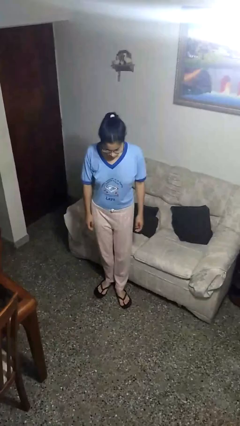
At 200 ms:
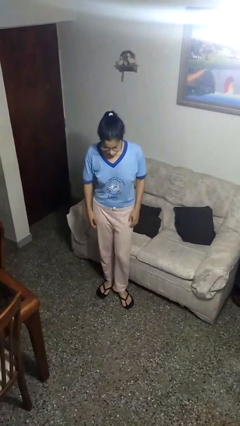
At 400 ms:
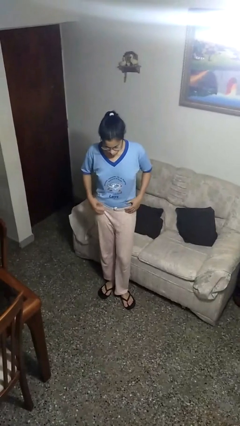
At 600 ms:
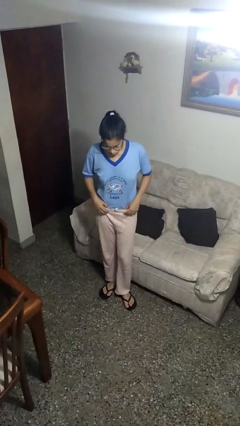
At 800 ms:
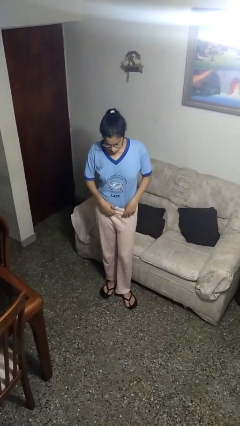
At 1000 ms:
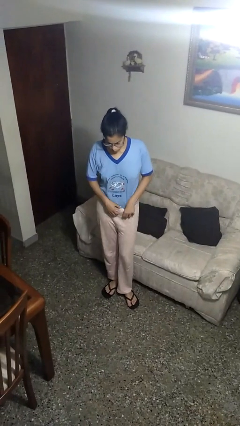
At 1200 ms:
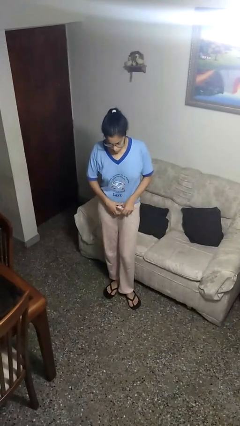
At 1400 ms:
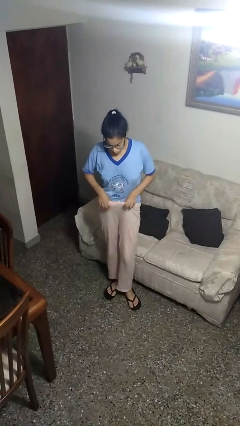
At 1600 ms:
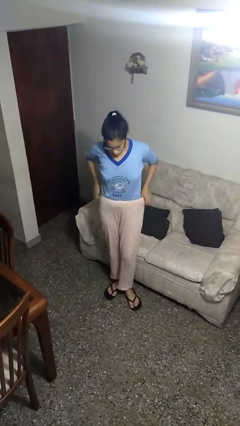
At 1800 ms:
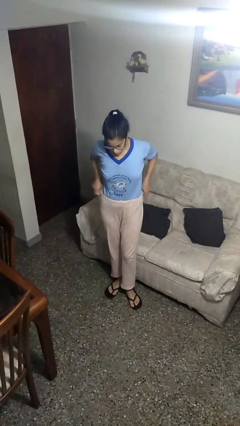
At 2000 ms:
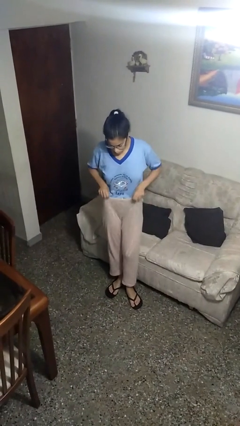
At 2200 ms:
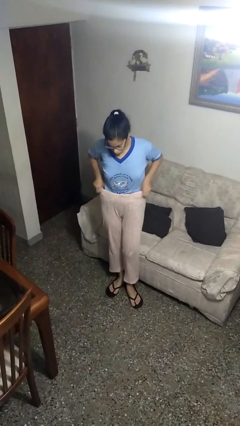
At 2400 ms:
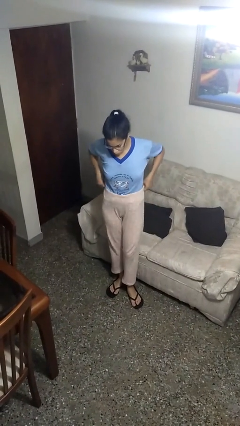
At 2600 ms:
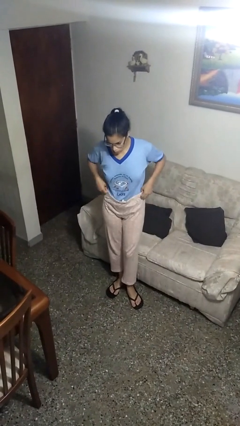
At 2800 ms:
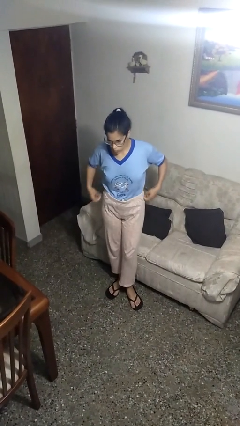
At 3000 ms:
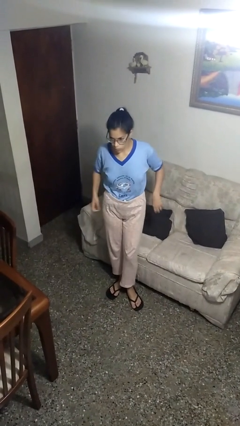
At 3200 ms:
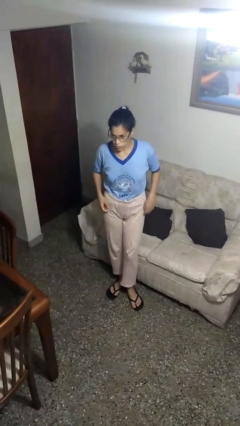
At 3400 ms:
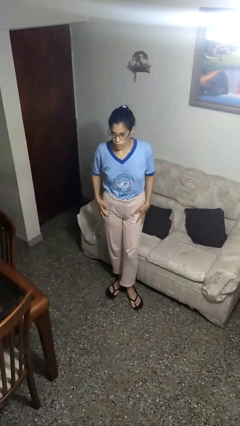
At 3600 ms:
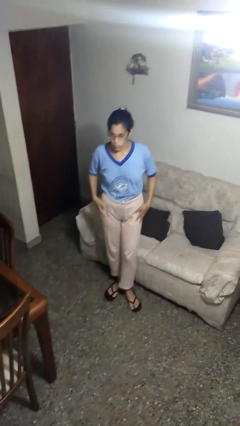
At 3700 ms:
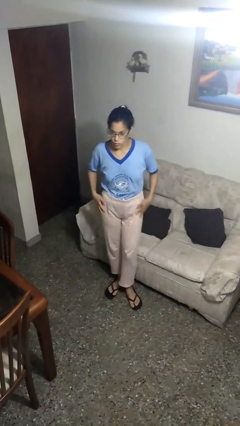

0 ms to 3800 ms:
person hikes up pants

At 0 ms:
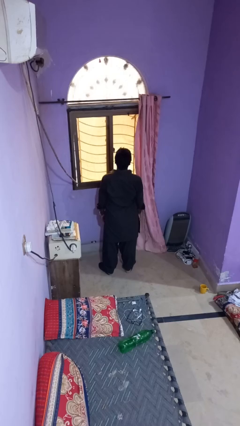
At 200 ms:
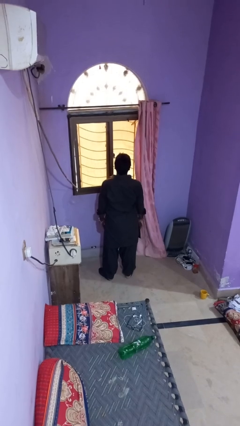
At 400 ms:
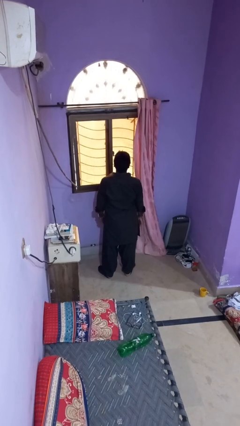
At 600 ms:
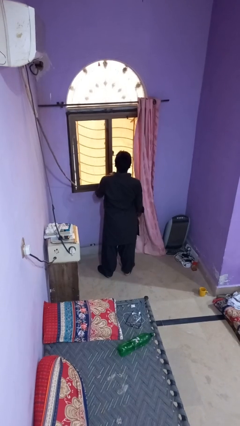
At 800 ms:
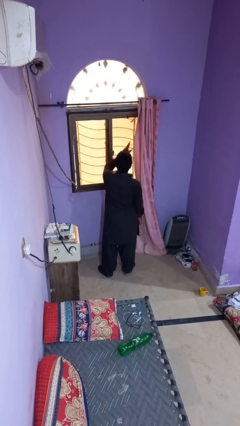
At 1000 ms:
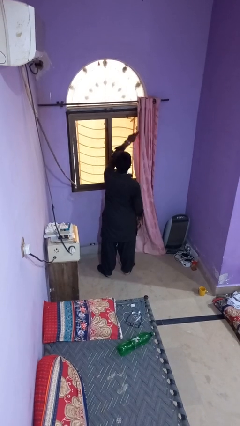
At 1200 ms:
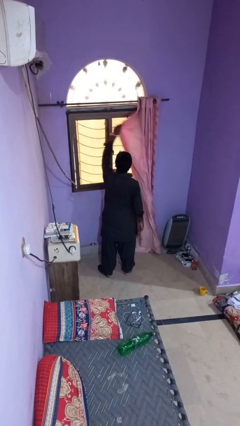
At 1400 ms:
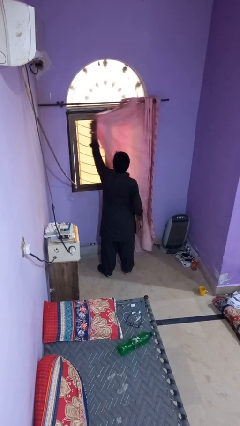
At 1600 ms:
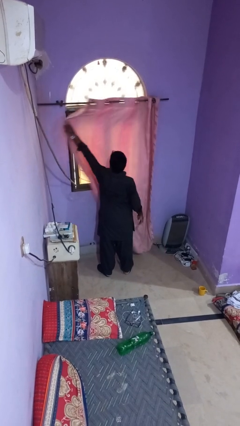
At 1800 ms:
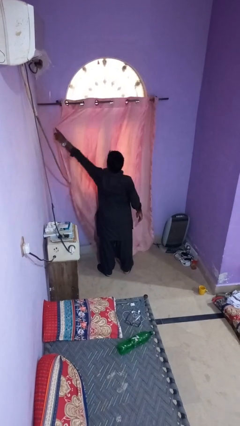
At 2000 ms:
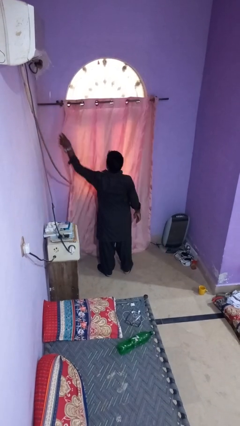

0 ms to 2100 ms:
person closes curtains

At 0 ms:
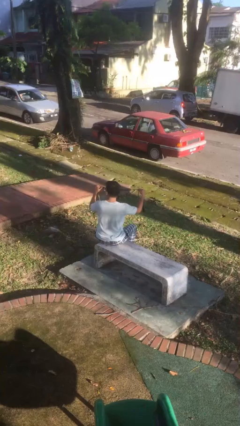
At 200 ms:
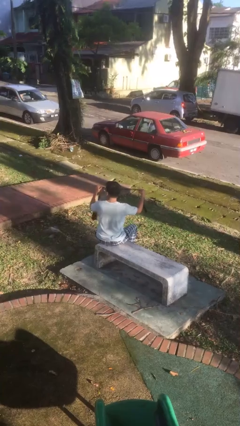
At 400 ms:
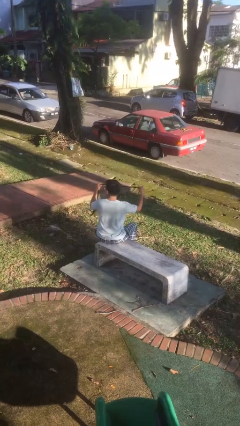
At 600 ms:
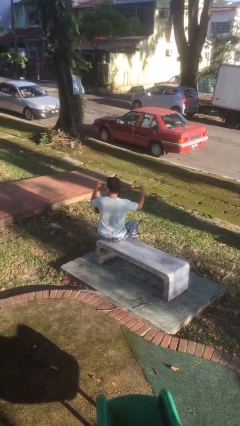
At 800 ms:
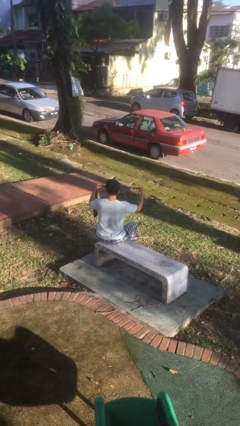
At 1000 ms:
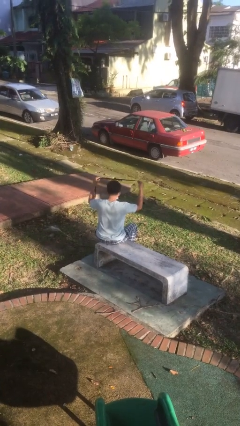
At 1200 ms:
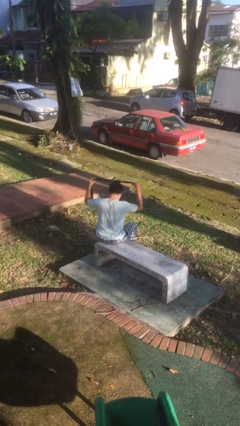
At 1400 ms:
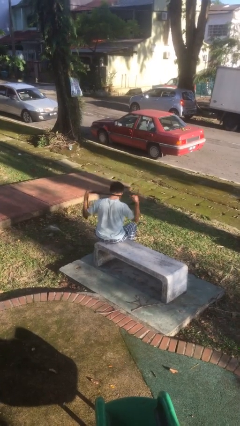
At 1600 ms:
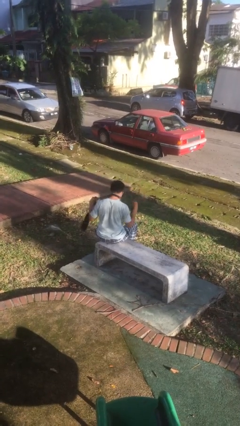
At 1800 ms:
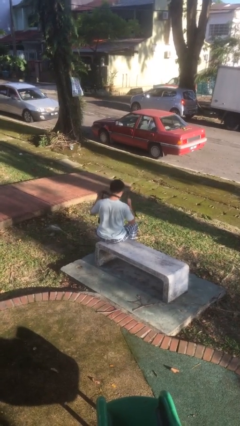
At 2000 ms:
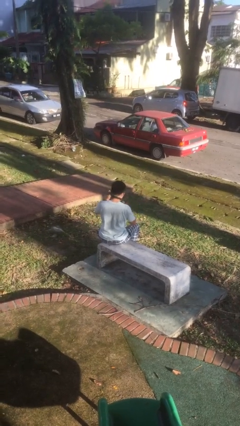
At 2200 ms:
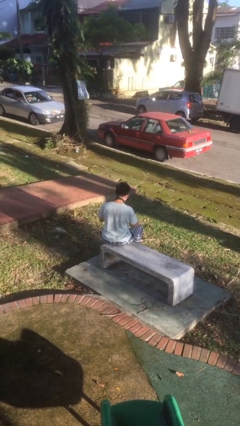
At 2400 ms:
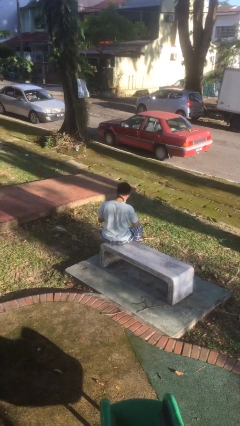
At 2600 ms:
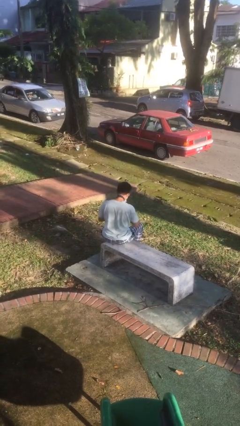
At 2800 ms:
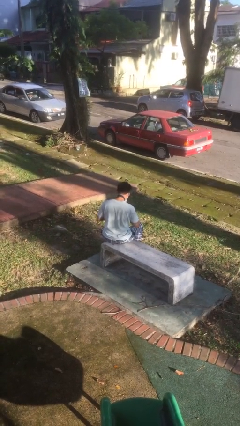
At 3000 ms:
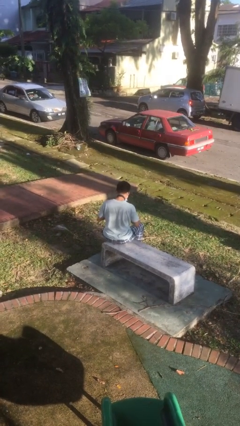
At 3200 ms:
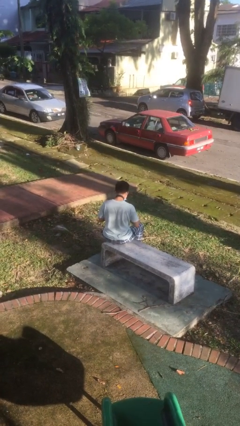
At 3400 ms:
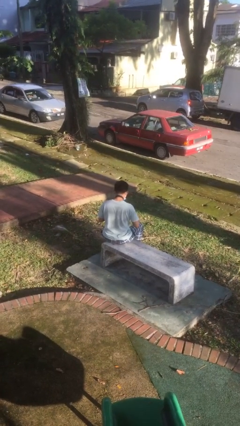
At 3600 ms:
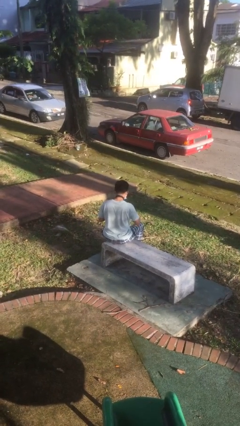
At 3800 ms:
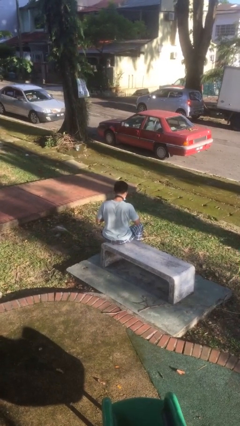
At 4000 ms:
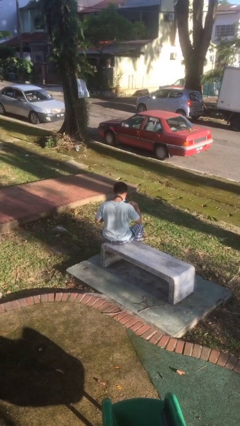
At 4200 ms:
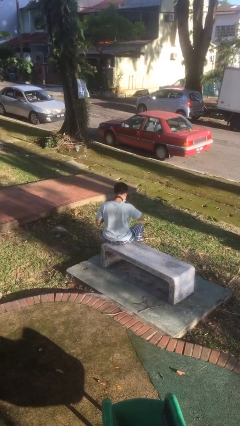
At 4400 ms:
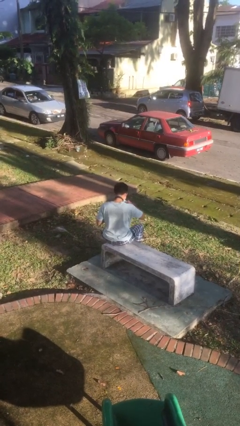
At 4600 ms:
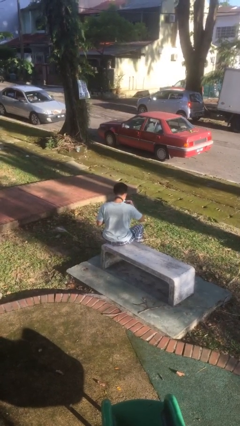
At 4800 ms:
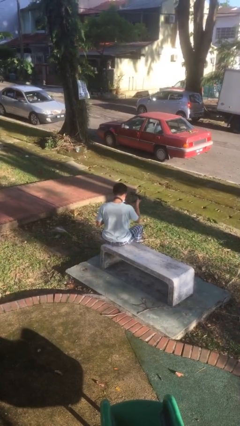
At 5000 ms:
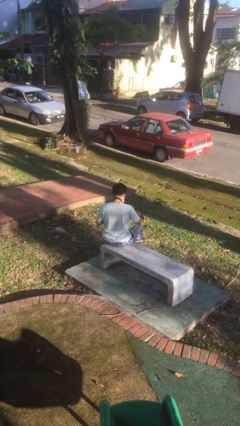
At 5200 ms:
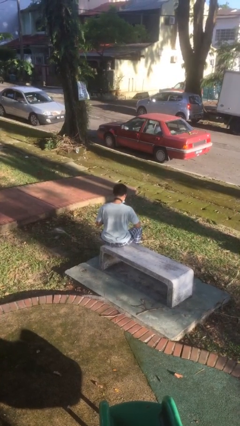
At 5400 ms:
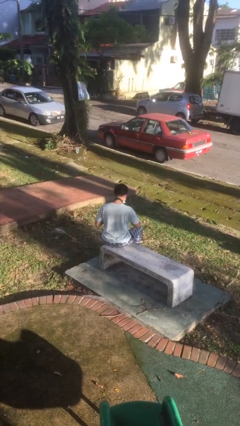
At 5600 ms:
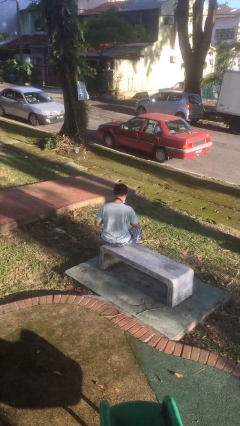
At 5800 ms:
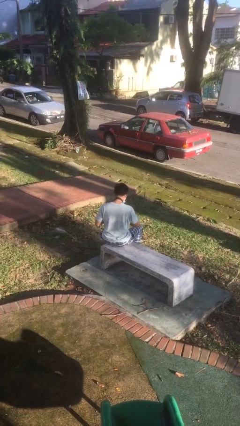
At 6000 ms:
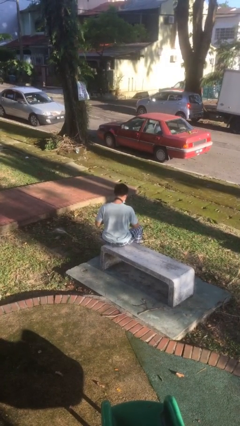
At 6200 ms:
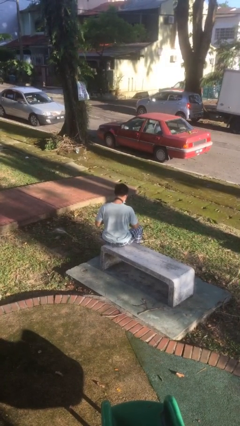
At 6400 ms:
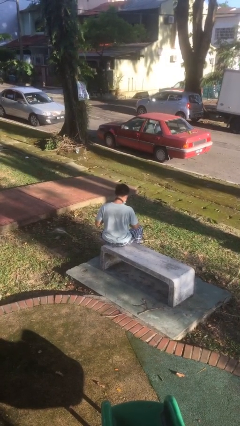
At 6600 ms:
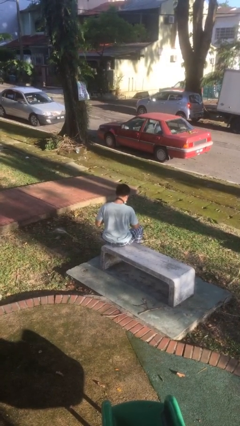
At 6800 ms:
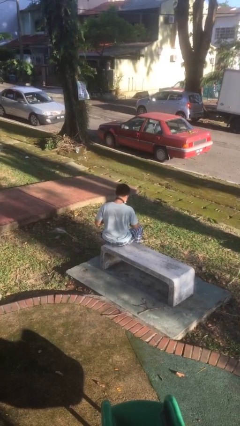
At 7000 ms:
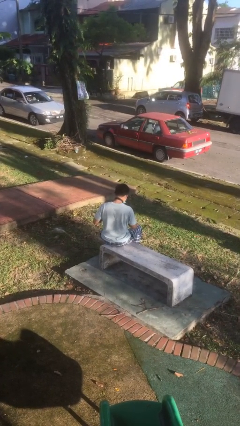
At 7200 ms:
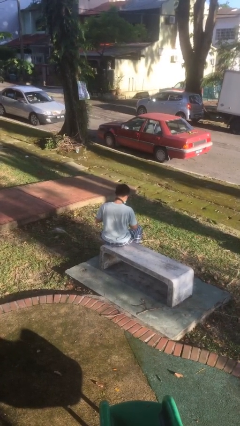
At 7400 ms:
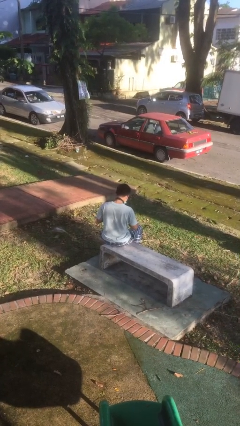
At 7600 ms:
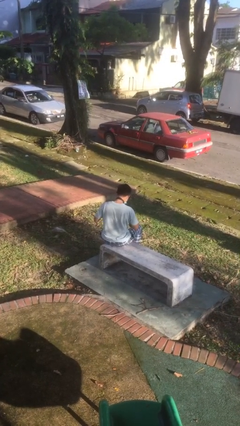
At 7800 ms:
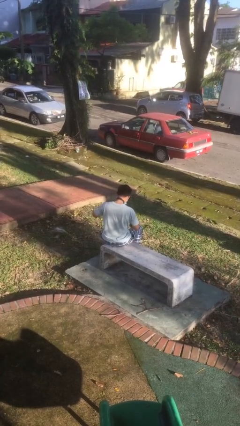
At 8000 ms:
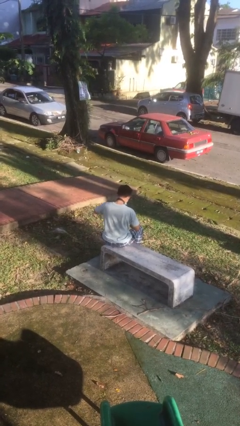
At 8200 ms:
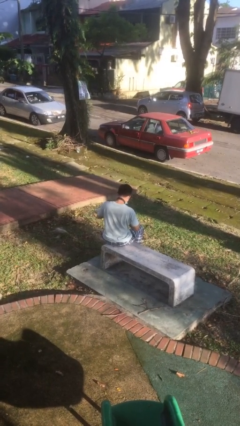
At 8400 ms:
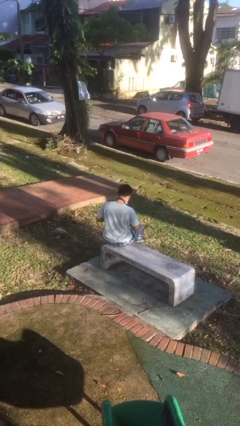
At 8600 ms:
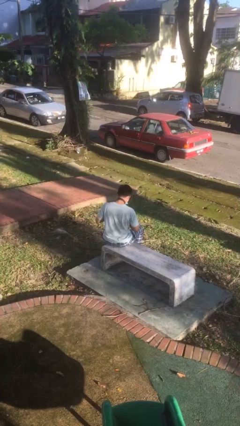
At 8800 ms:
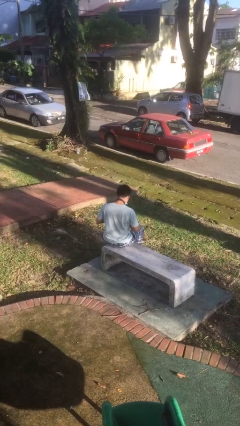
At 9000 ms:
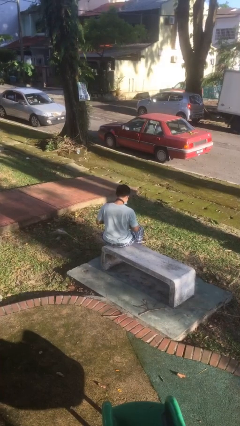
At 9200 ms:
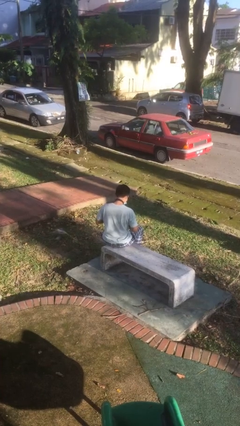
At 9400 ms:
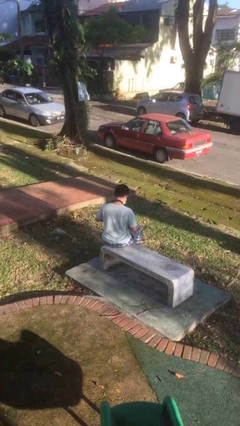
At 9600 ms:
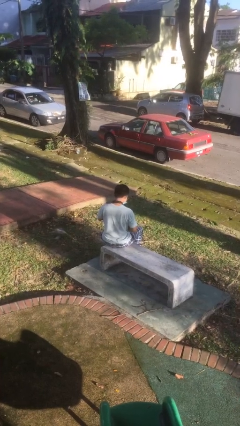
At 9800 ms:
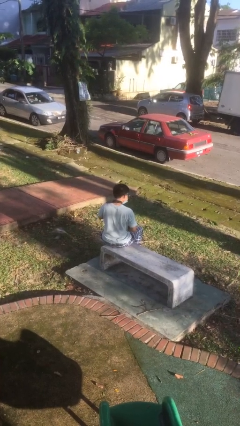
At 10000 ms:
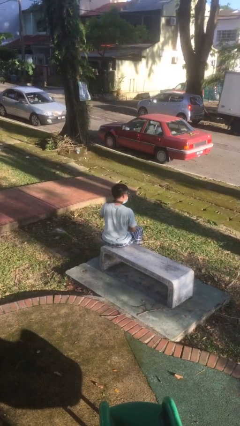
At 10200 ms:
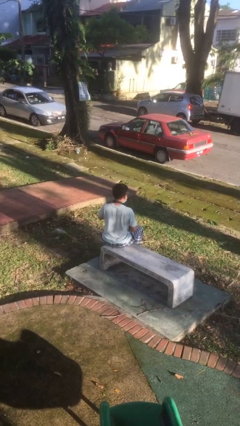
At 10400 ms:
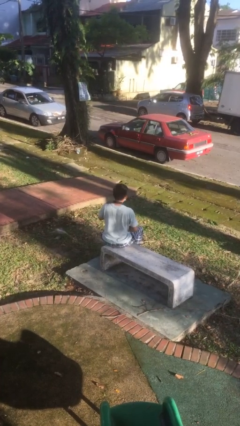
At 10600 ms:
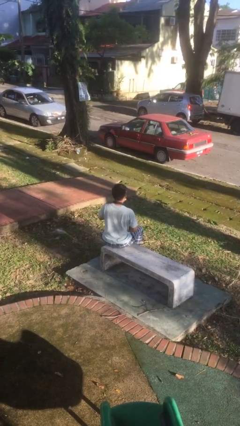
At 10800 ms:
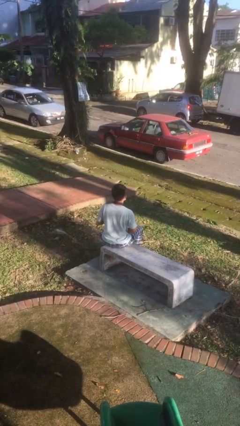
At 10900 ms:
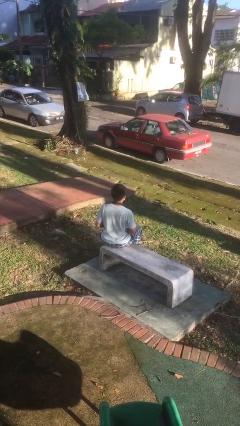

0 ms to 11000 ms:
person puts on necktie

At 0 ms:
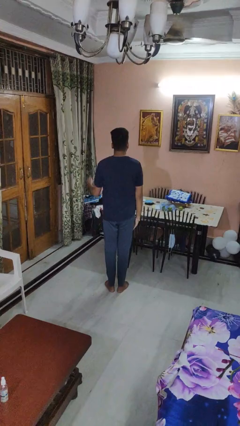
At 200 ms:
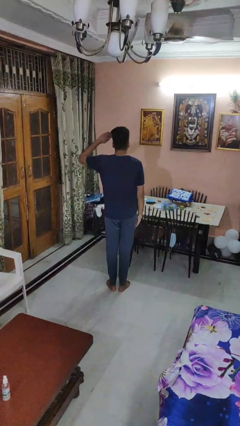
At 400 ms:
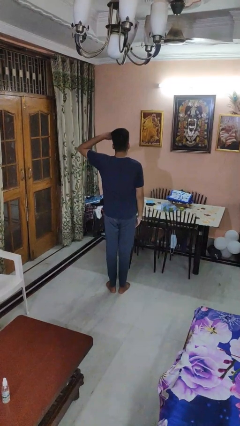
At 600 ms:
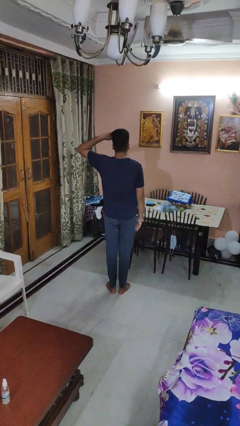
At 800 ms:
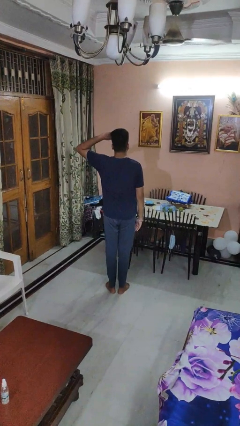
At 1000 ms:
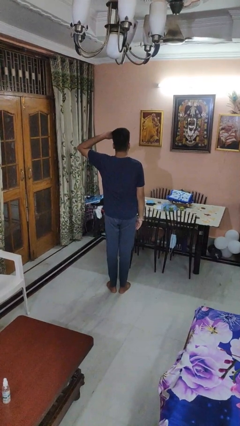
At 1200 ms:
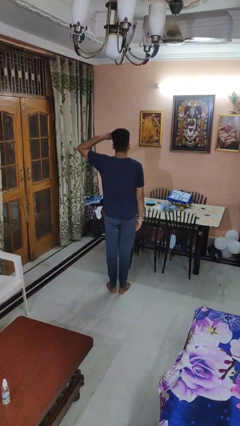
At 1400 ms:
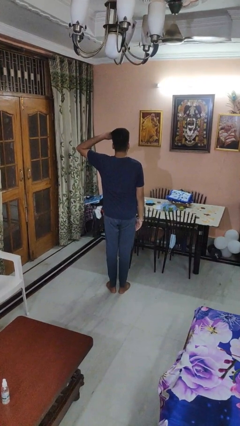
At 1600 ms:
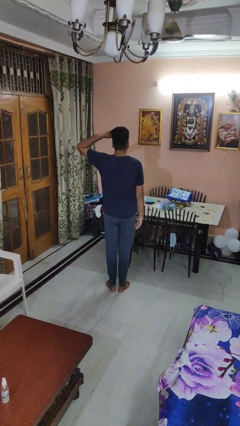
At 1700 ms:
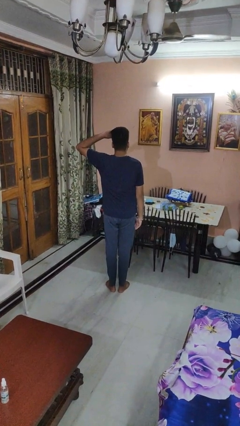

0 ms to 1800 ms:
person salutes
